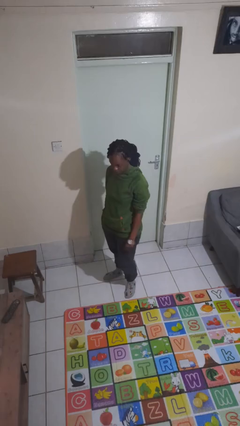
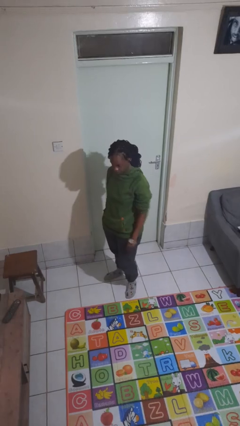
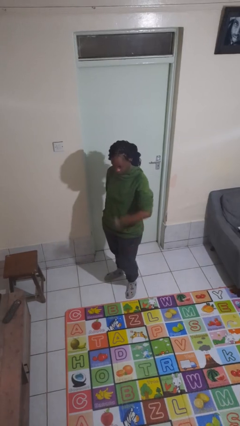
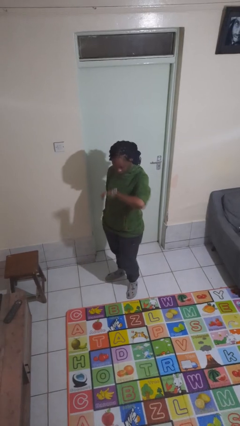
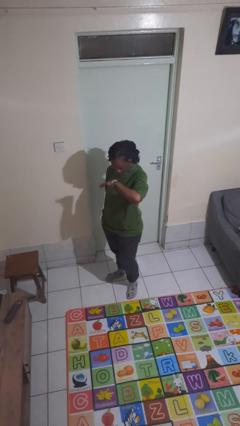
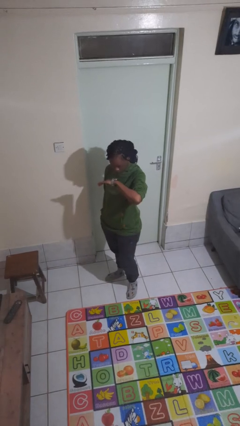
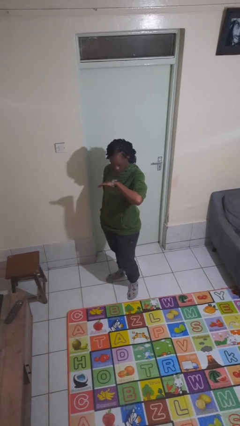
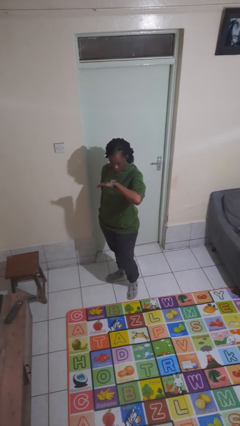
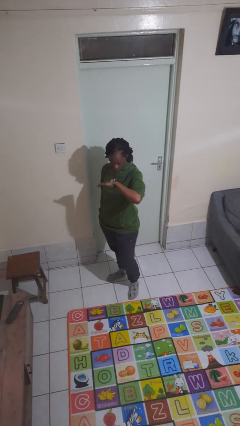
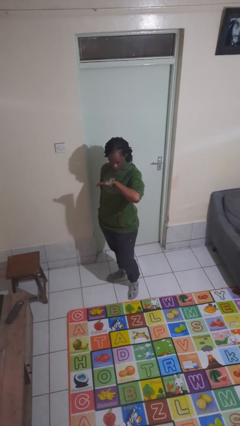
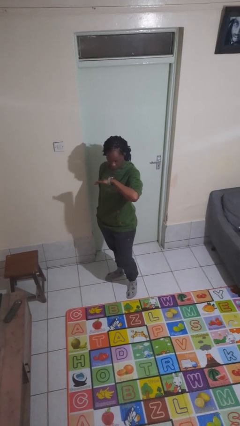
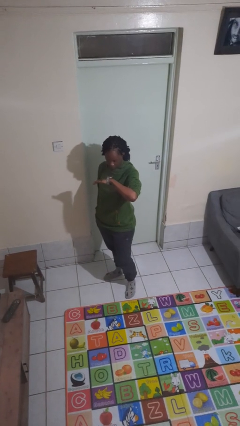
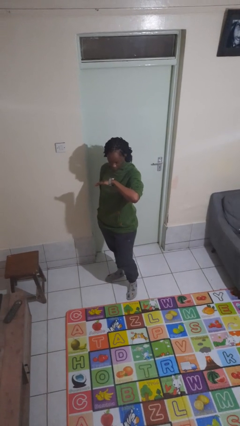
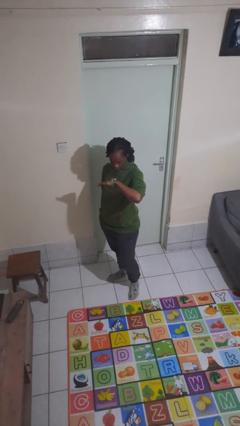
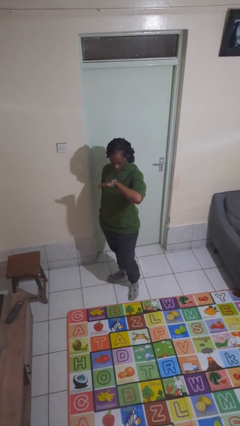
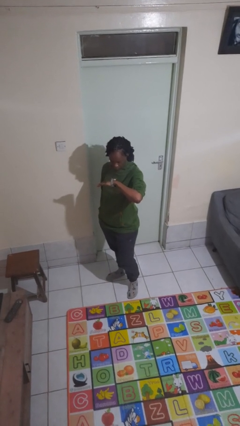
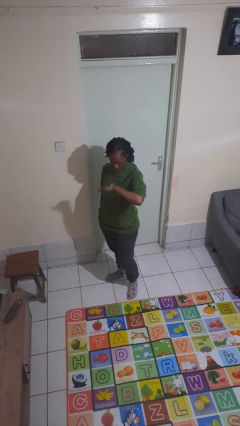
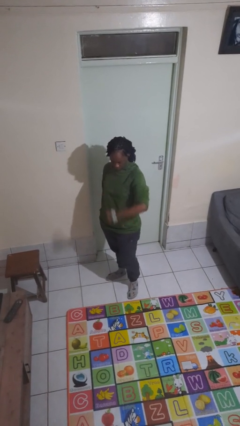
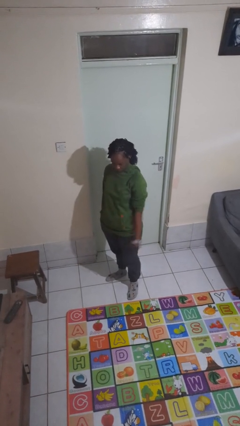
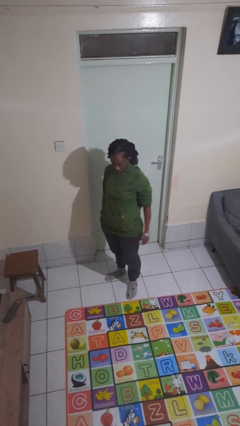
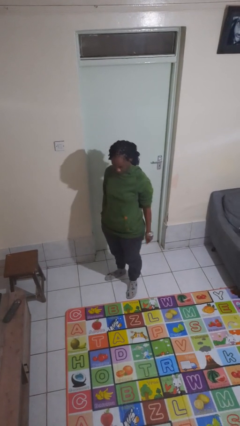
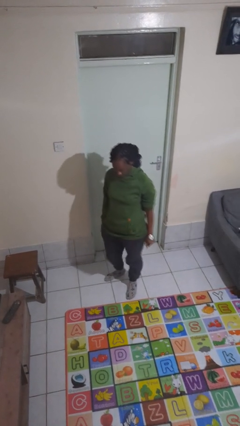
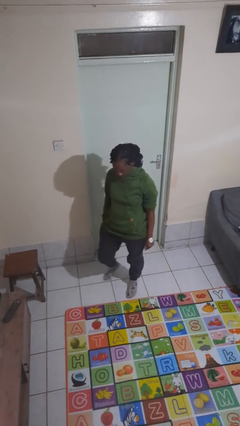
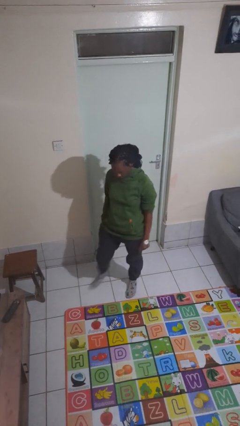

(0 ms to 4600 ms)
person looks at wristwatch

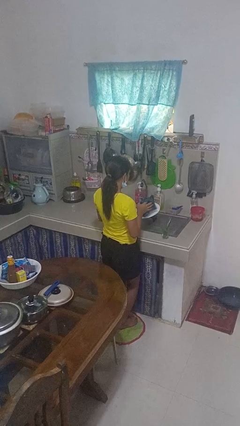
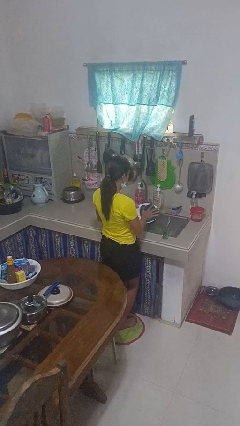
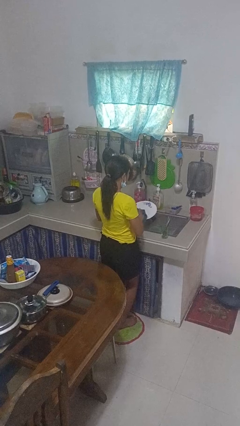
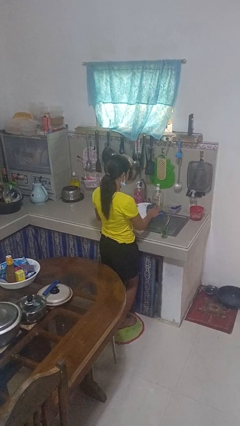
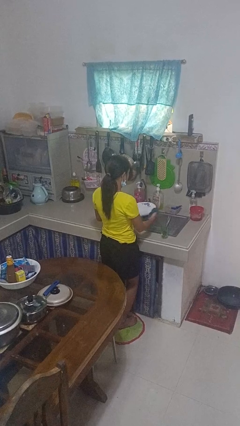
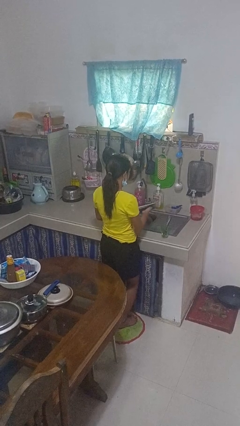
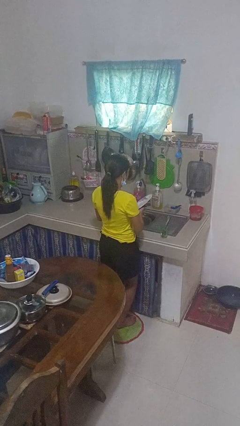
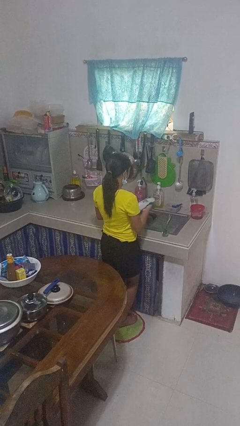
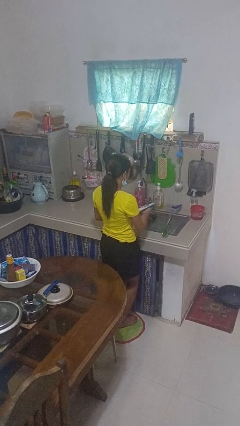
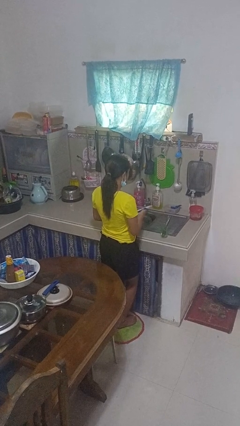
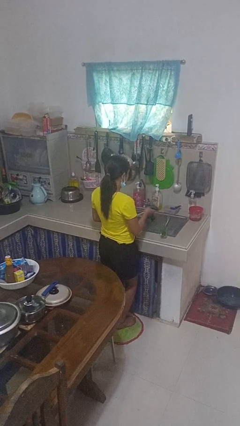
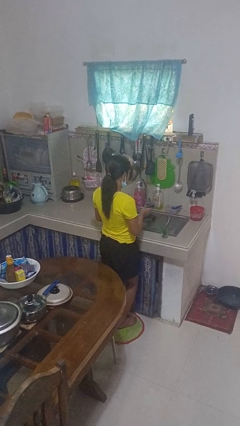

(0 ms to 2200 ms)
person dries dish

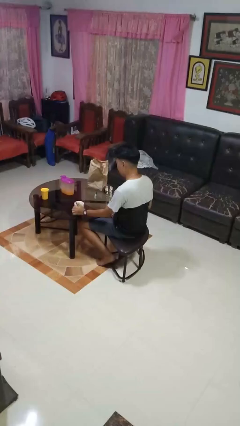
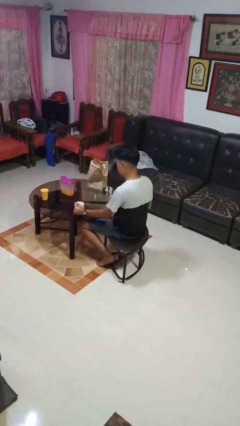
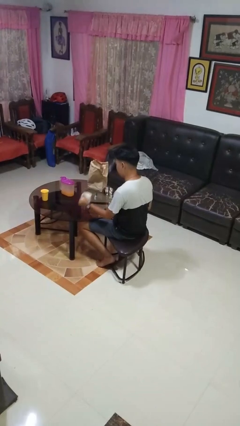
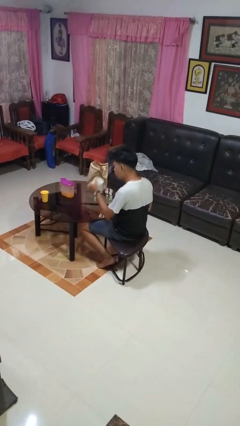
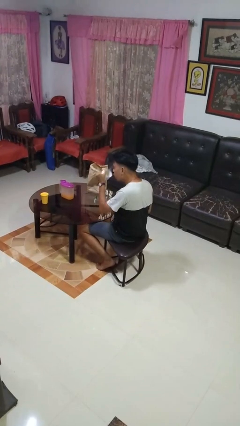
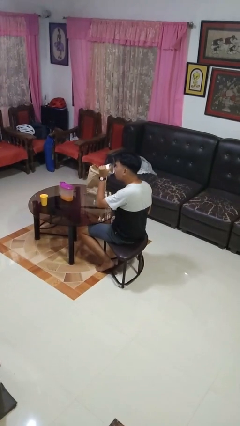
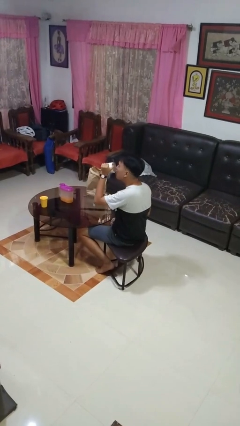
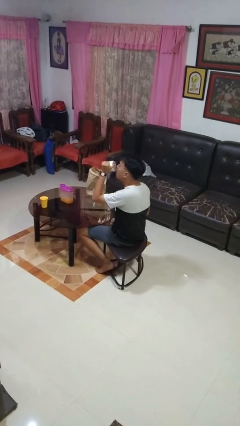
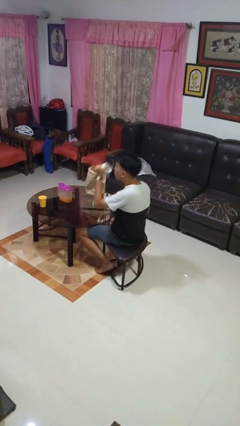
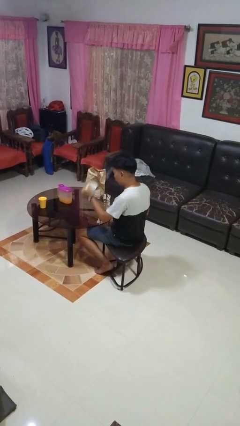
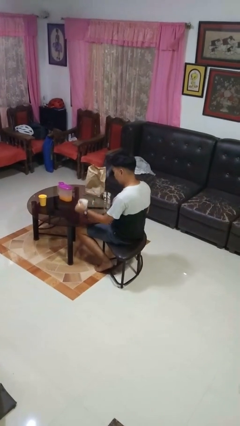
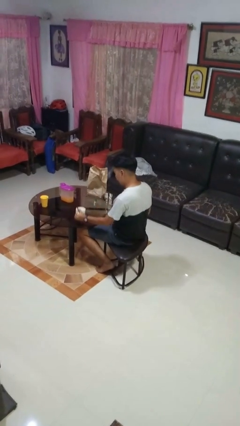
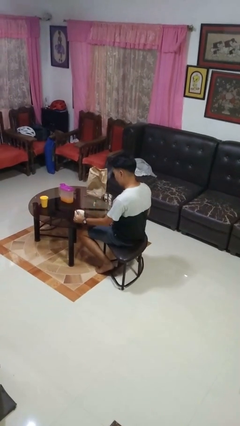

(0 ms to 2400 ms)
person drinks from mug

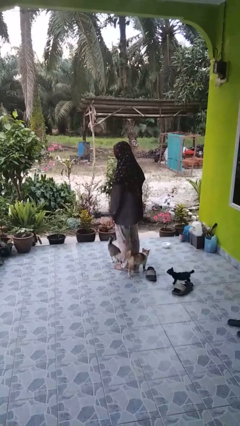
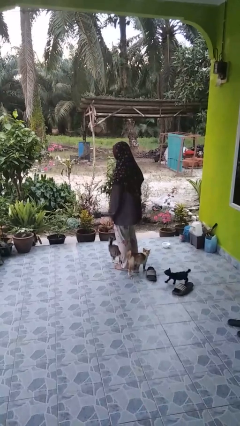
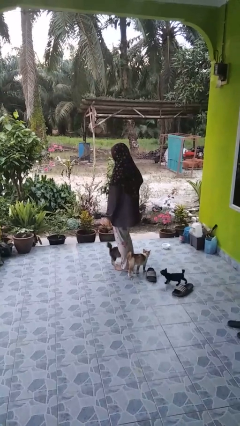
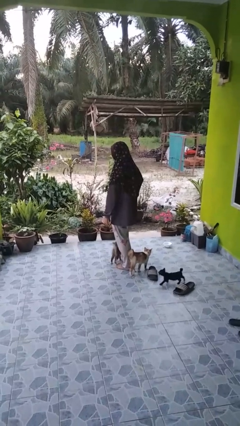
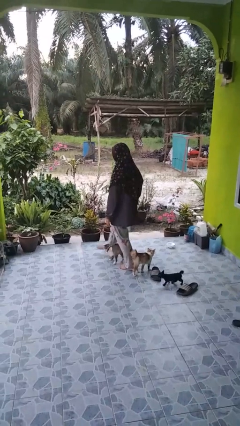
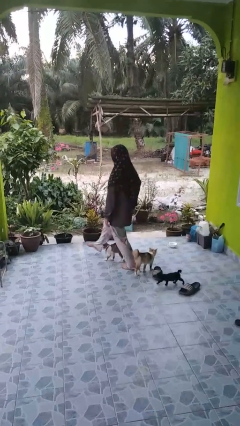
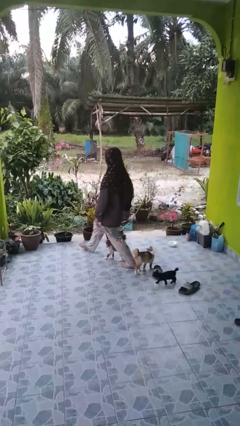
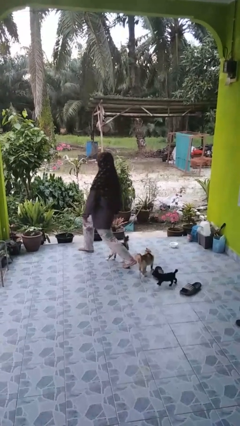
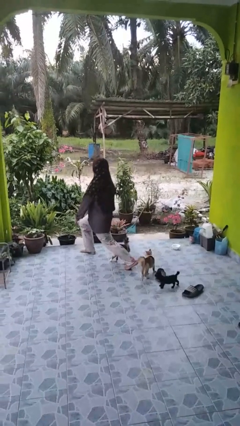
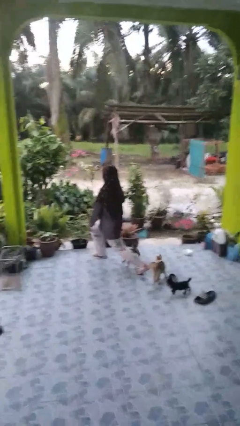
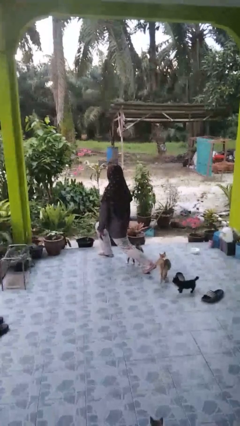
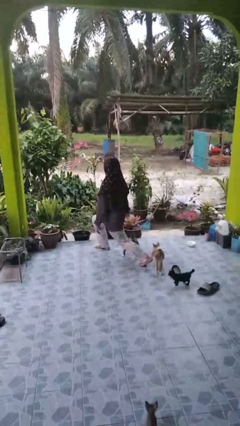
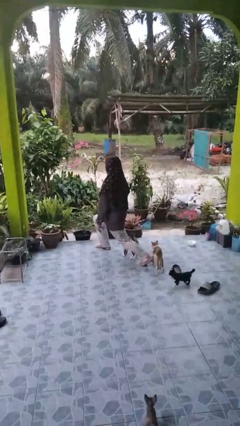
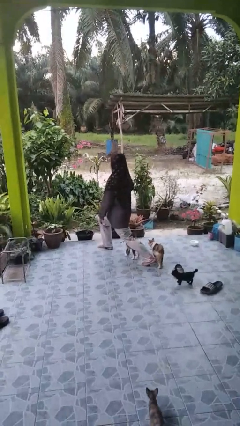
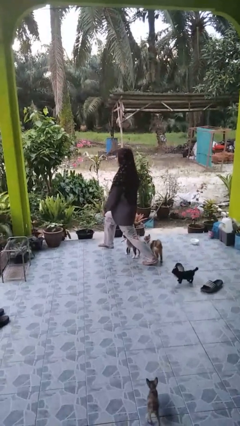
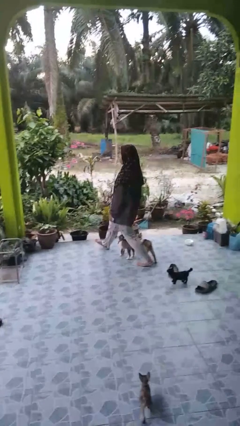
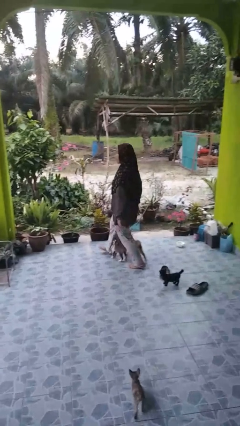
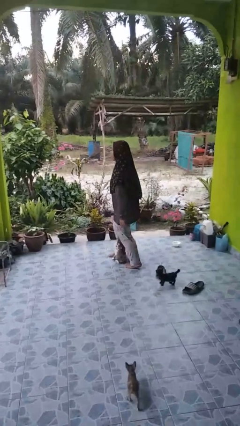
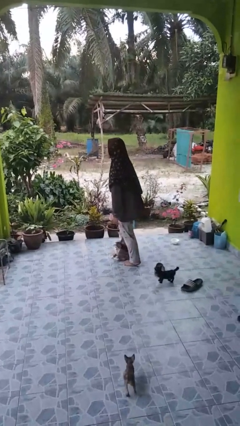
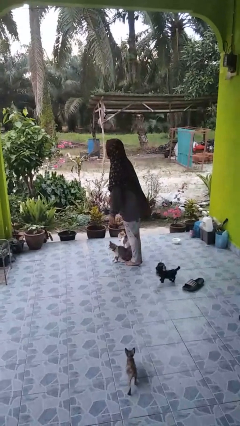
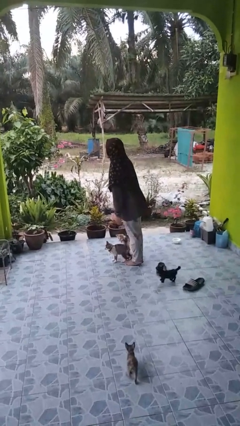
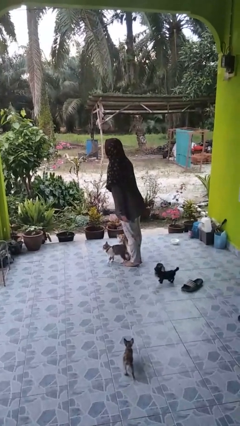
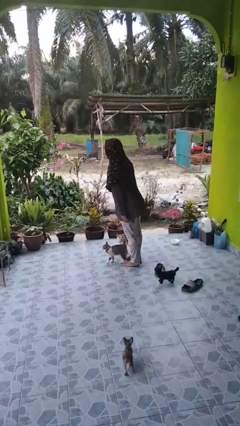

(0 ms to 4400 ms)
person exercises with lunges

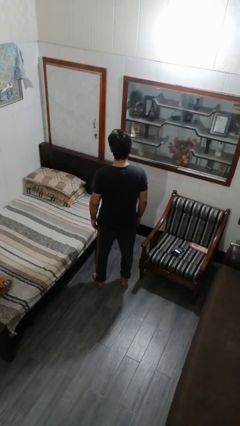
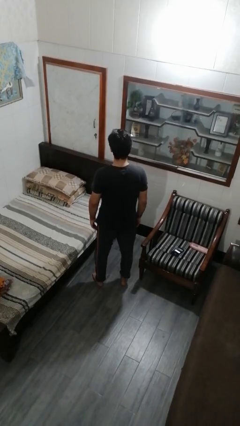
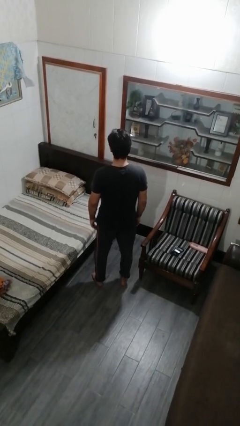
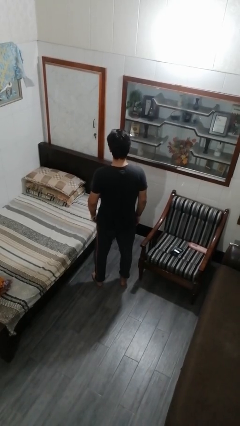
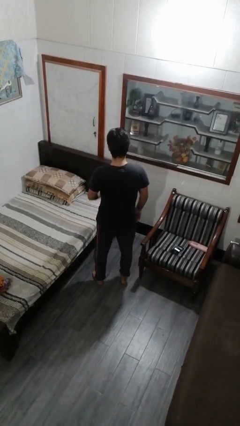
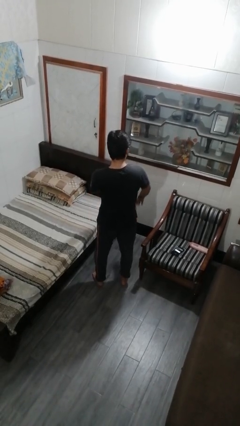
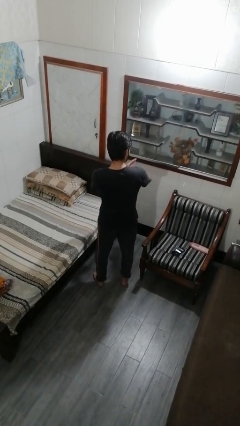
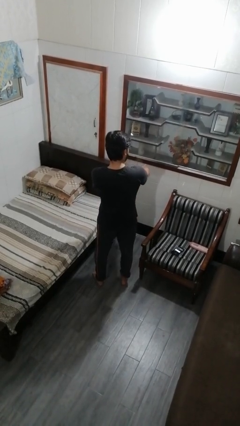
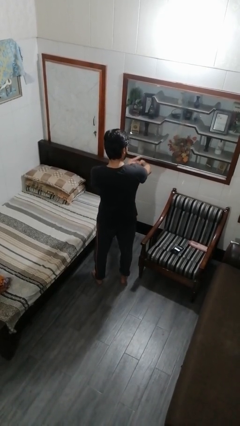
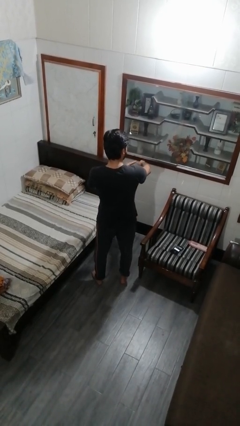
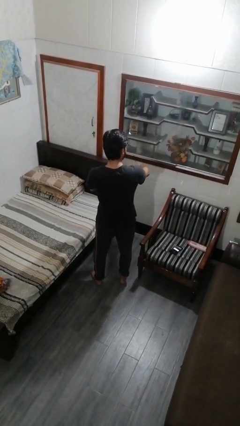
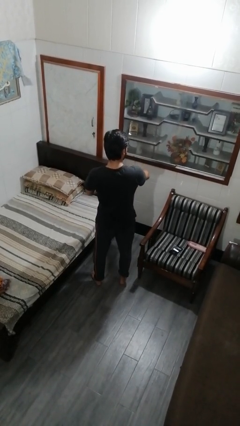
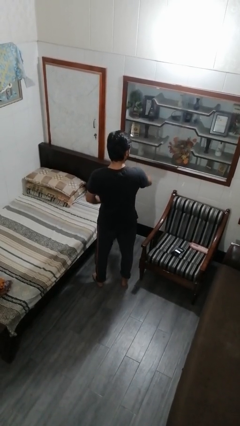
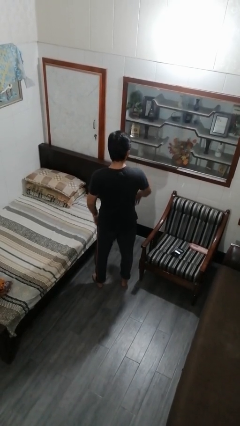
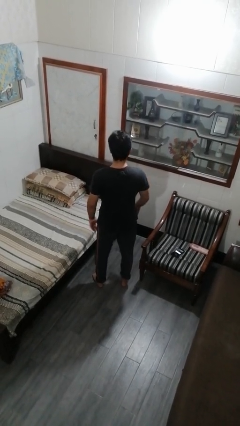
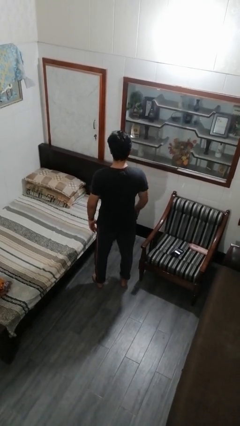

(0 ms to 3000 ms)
person swats bug

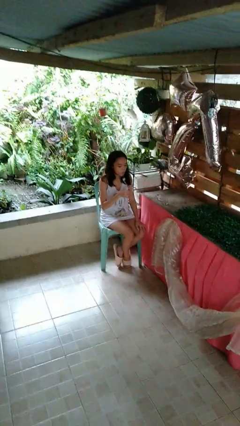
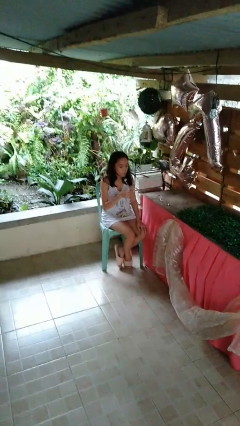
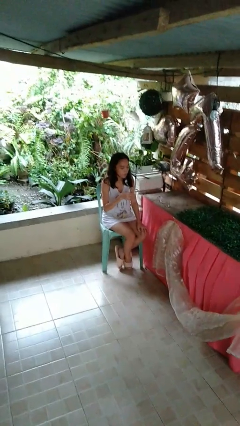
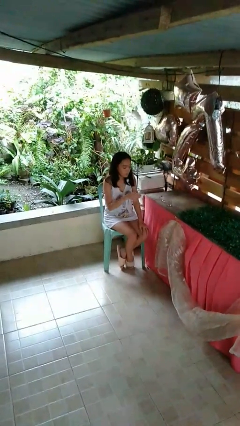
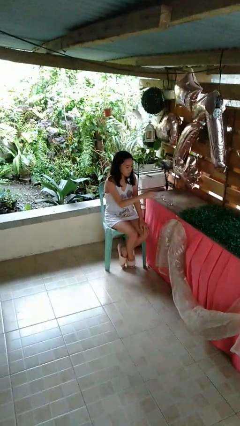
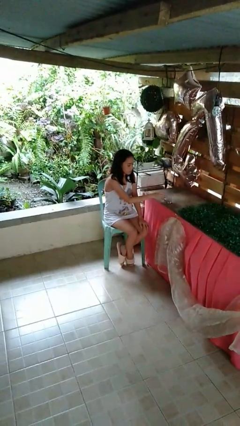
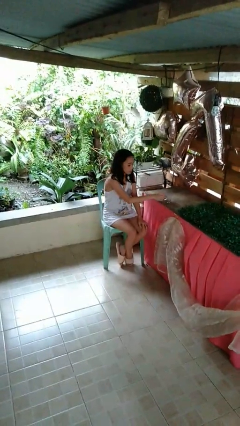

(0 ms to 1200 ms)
person puts down object on table
